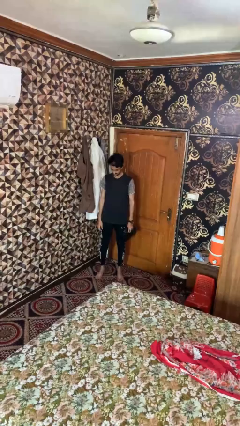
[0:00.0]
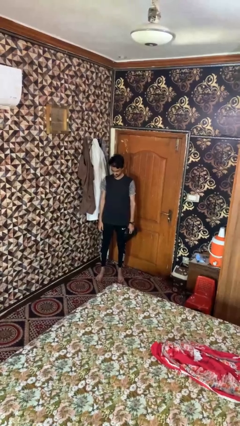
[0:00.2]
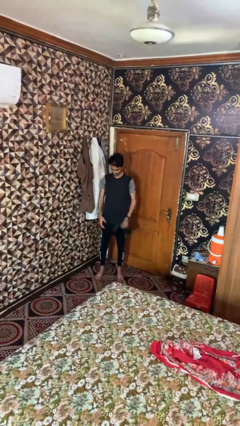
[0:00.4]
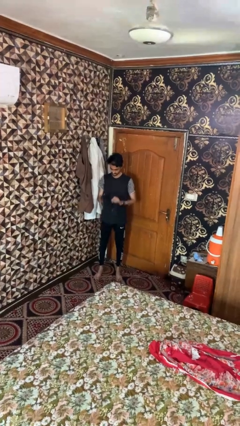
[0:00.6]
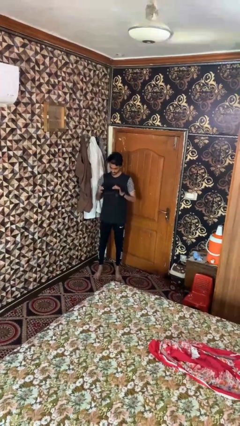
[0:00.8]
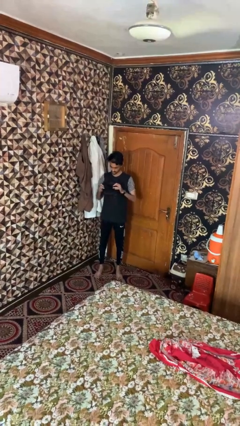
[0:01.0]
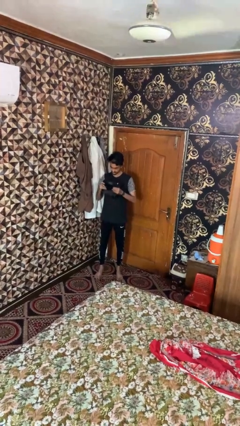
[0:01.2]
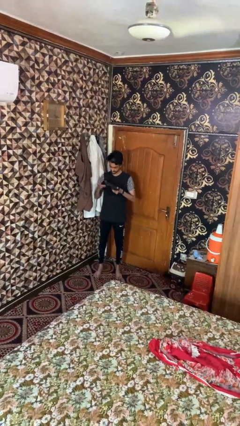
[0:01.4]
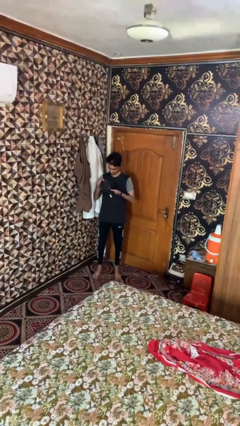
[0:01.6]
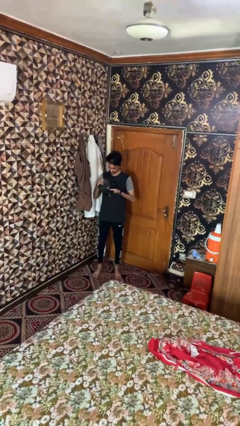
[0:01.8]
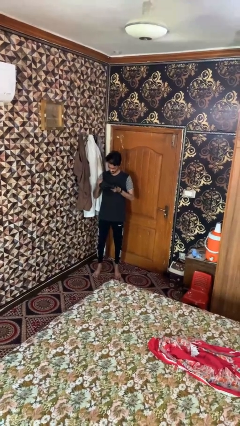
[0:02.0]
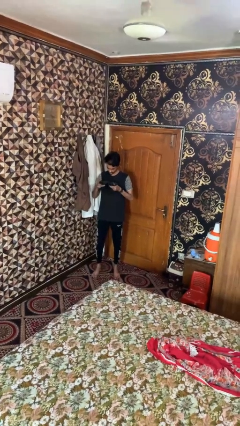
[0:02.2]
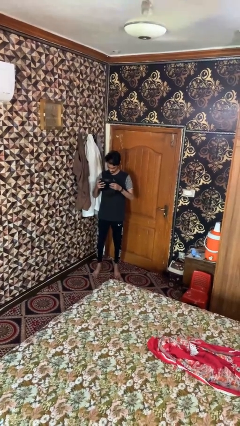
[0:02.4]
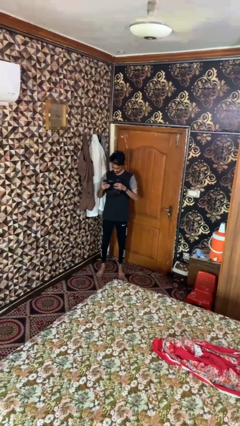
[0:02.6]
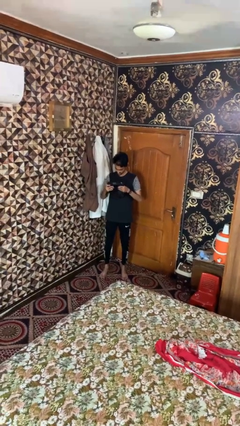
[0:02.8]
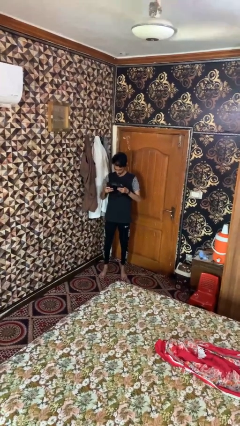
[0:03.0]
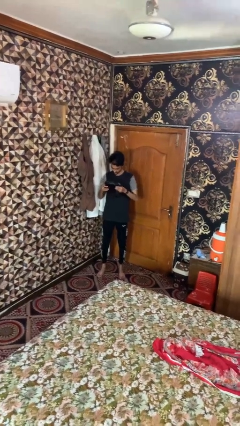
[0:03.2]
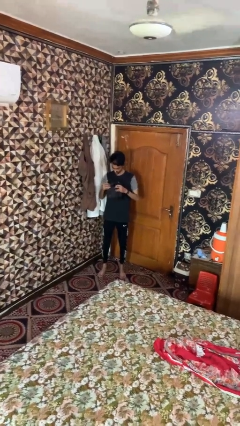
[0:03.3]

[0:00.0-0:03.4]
person squeezes object

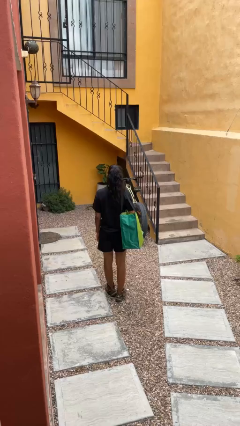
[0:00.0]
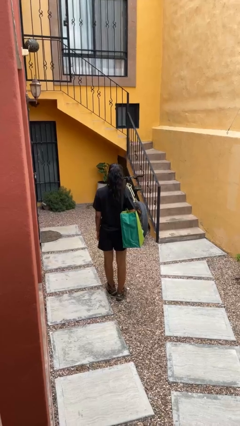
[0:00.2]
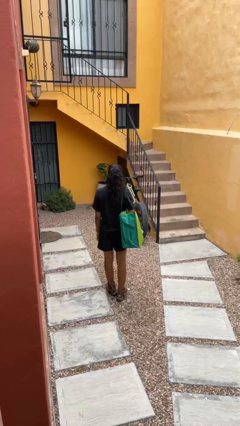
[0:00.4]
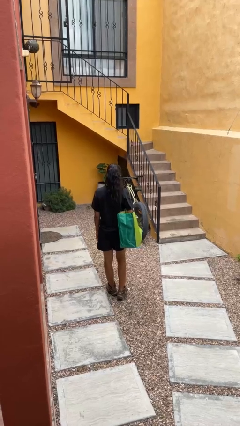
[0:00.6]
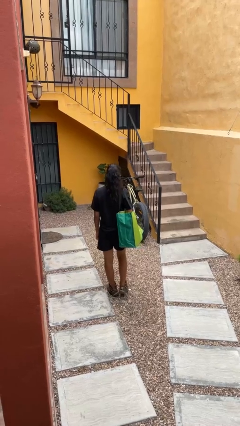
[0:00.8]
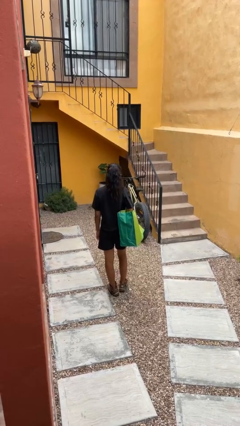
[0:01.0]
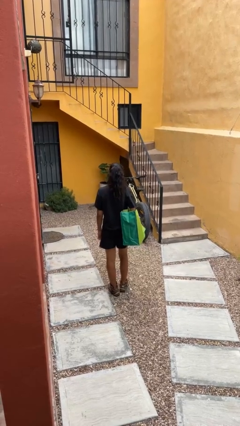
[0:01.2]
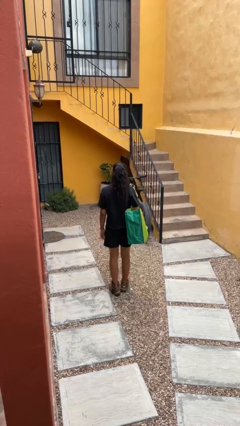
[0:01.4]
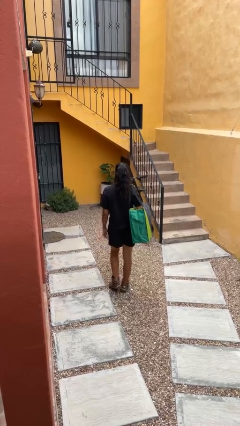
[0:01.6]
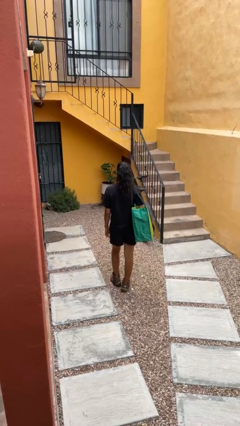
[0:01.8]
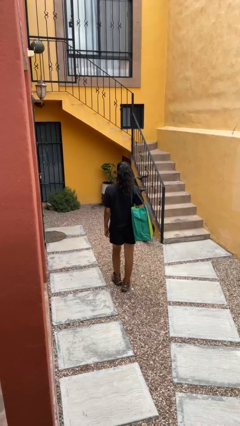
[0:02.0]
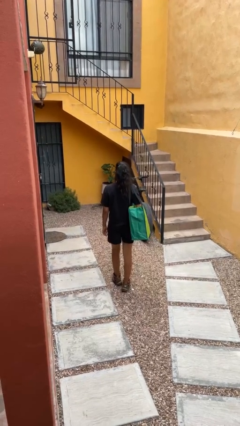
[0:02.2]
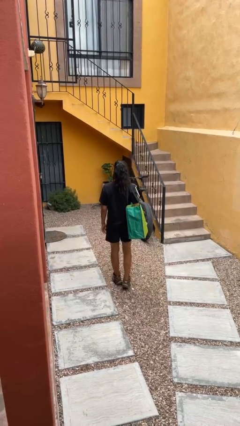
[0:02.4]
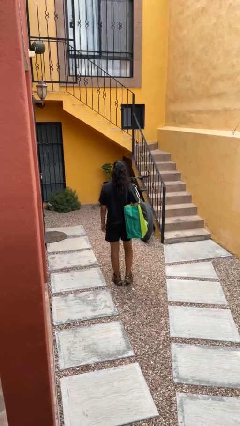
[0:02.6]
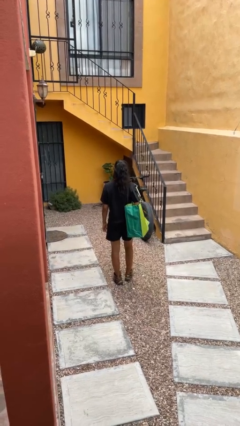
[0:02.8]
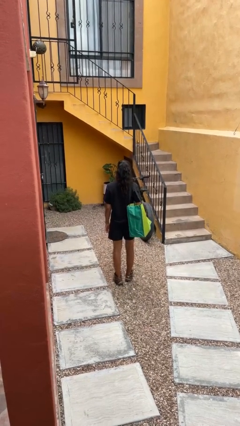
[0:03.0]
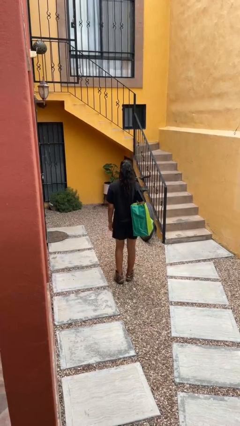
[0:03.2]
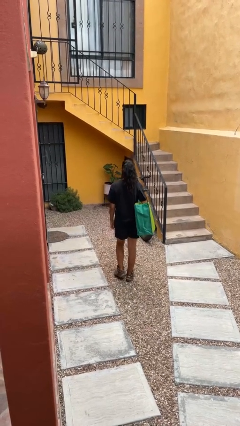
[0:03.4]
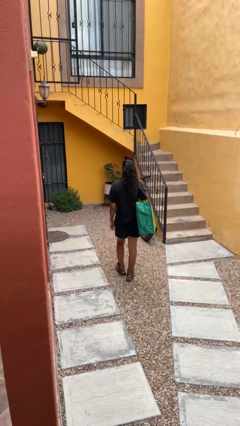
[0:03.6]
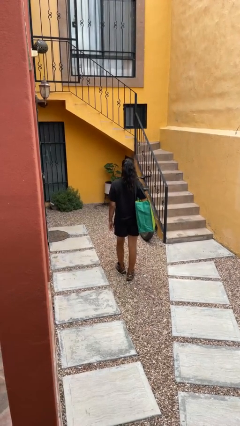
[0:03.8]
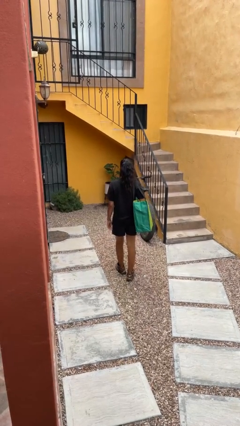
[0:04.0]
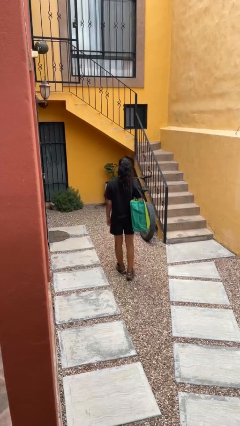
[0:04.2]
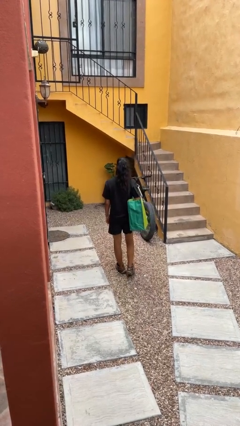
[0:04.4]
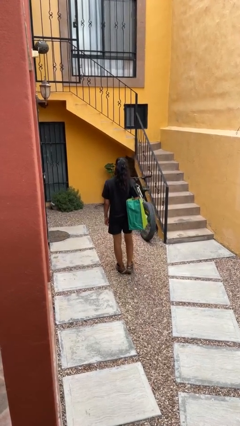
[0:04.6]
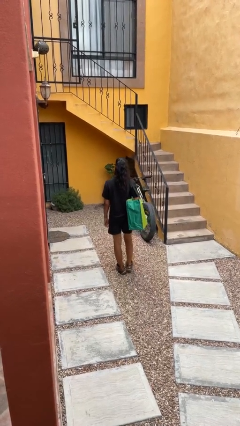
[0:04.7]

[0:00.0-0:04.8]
person carries groceries

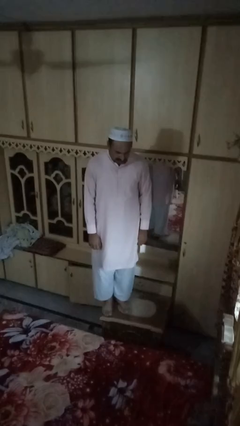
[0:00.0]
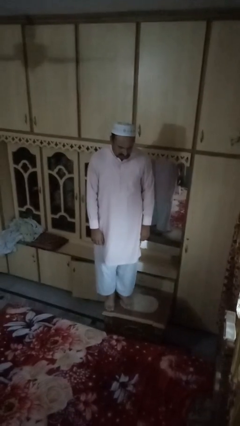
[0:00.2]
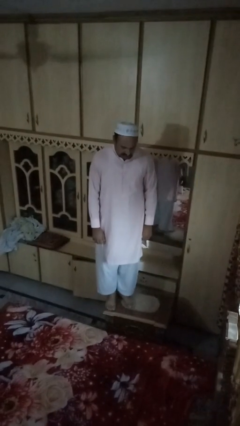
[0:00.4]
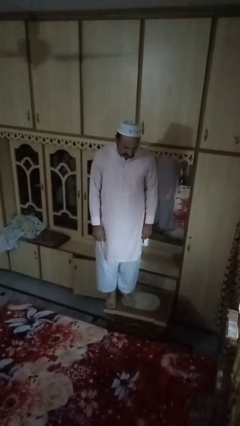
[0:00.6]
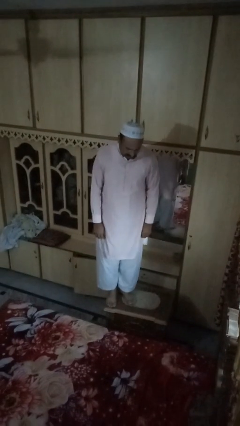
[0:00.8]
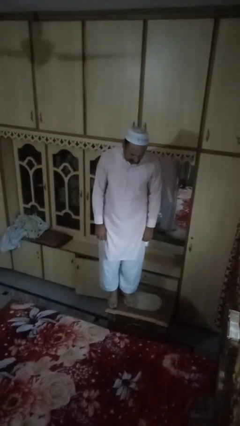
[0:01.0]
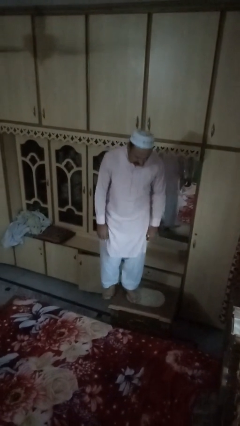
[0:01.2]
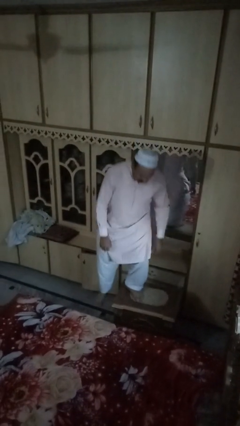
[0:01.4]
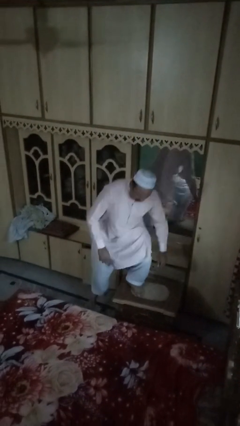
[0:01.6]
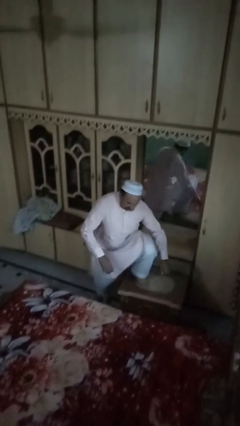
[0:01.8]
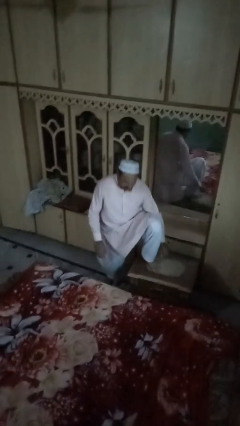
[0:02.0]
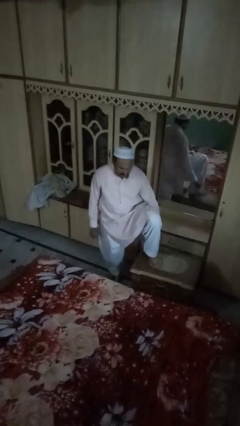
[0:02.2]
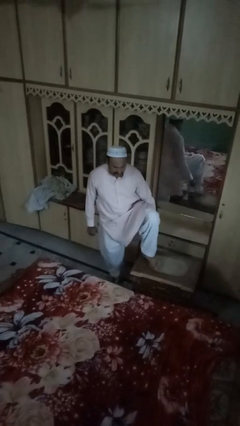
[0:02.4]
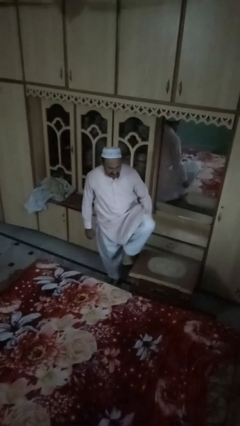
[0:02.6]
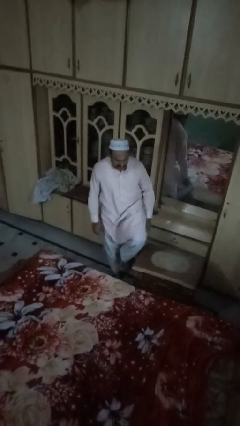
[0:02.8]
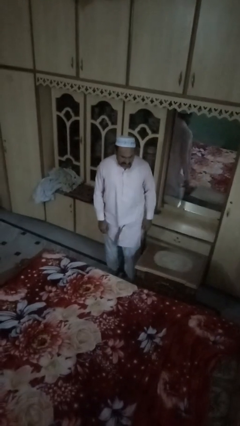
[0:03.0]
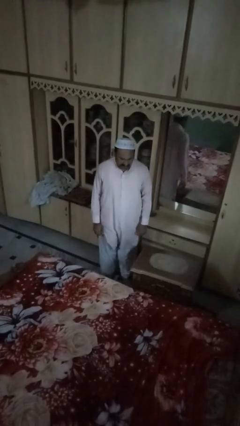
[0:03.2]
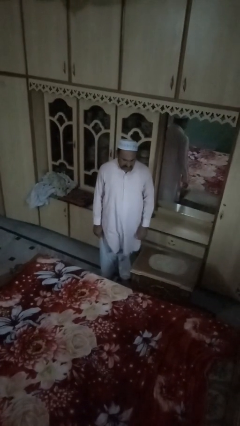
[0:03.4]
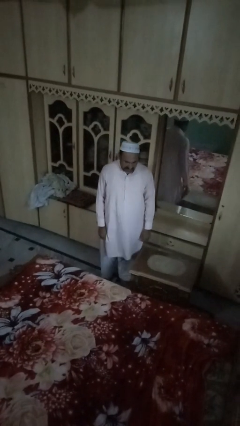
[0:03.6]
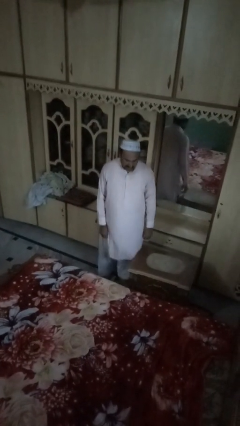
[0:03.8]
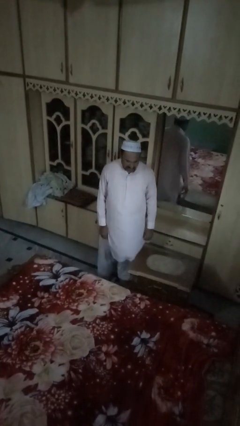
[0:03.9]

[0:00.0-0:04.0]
person climbs off table

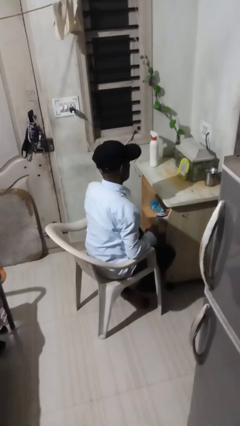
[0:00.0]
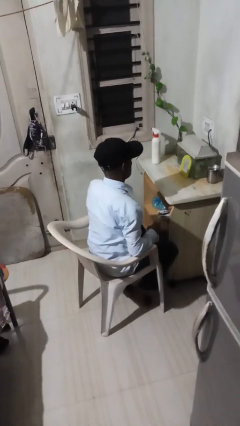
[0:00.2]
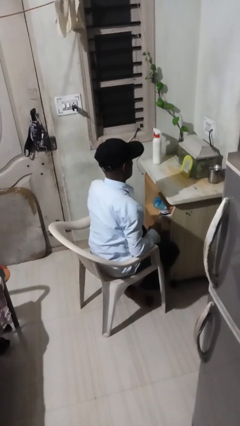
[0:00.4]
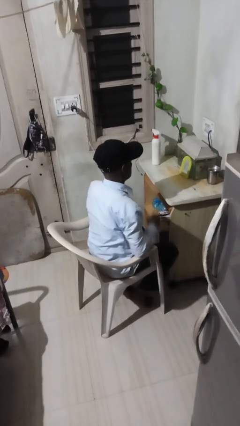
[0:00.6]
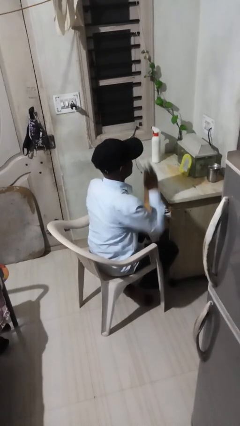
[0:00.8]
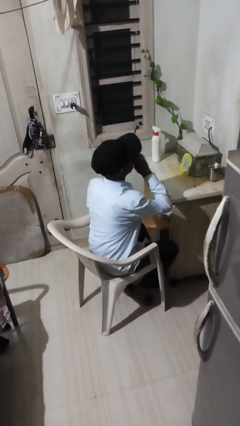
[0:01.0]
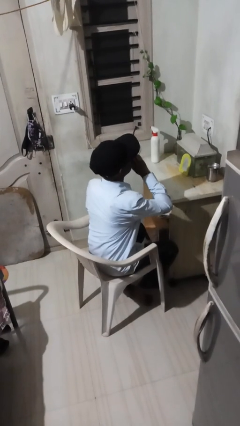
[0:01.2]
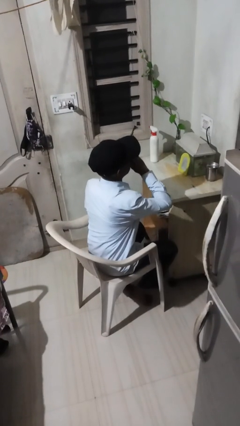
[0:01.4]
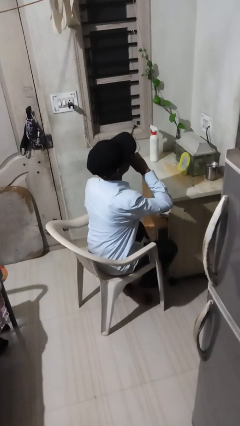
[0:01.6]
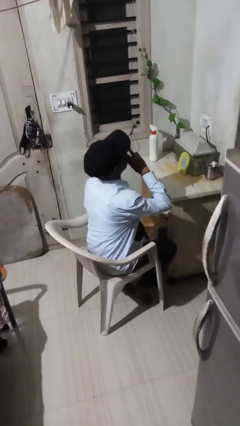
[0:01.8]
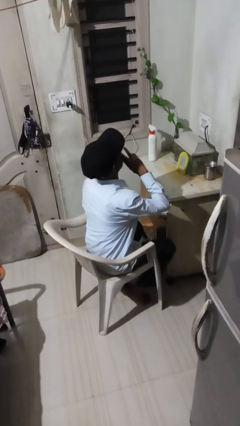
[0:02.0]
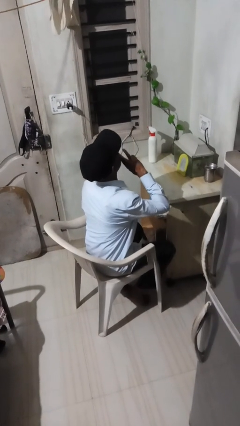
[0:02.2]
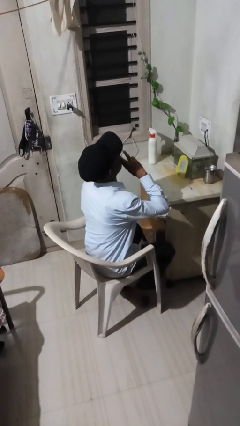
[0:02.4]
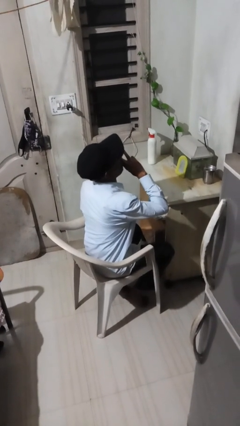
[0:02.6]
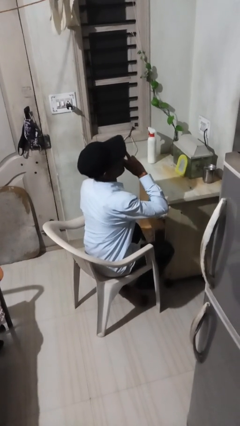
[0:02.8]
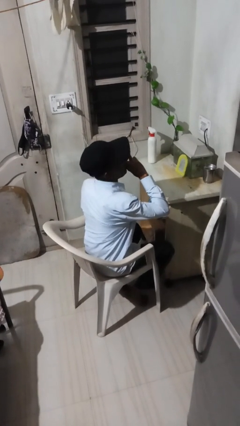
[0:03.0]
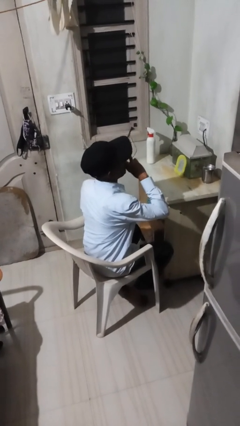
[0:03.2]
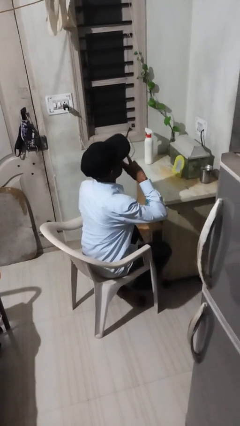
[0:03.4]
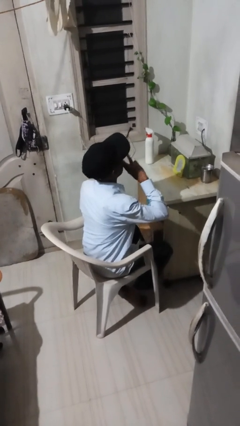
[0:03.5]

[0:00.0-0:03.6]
person licks fingers

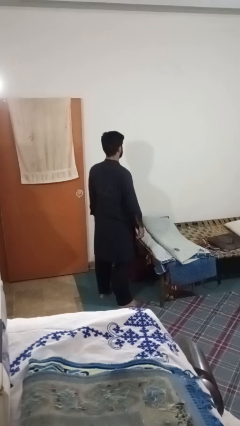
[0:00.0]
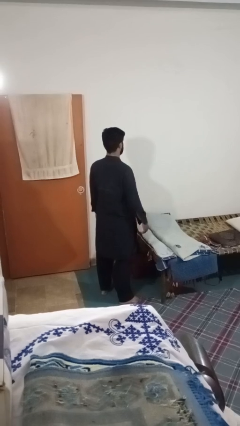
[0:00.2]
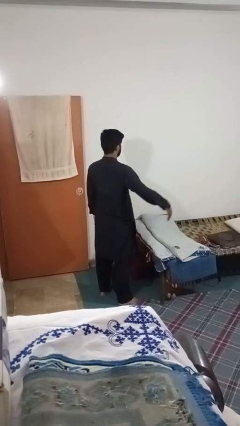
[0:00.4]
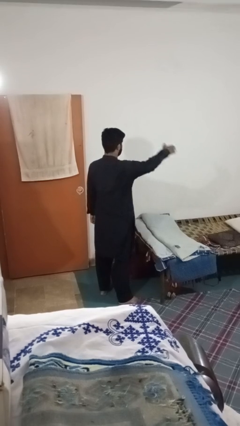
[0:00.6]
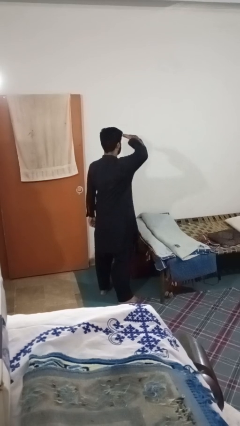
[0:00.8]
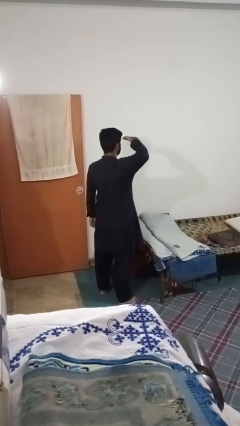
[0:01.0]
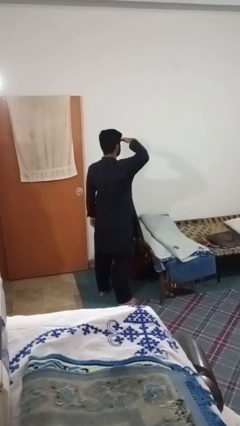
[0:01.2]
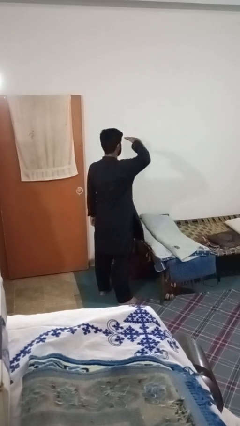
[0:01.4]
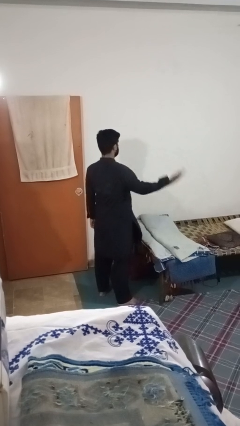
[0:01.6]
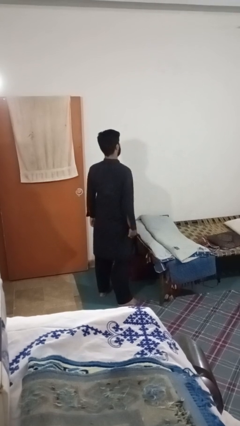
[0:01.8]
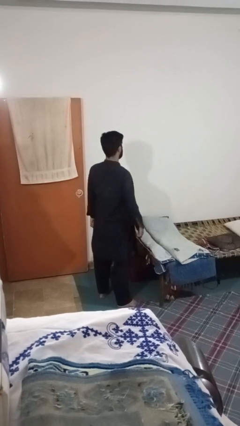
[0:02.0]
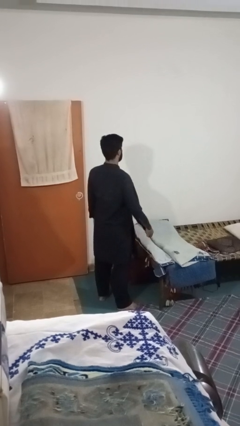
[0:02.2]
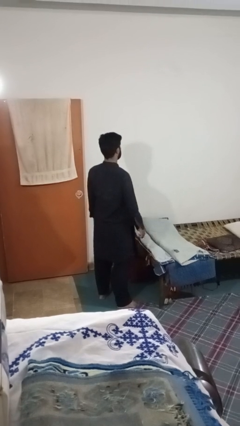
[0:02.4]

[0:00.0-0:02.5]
person salutes
